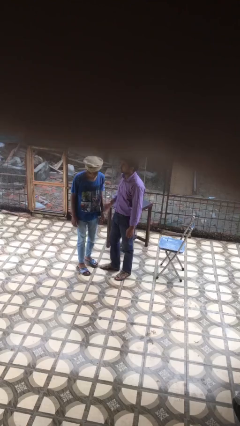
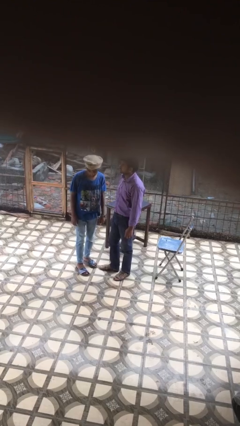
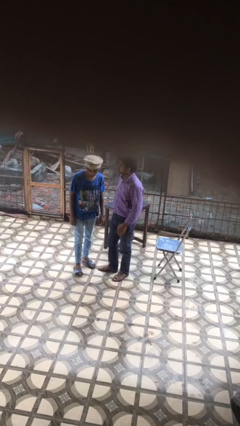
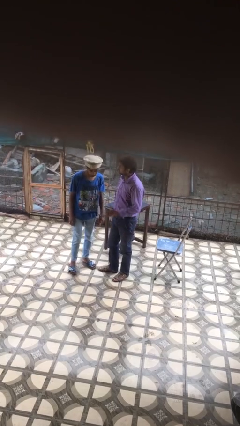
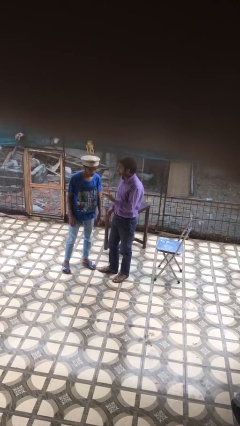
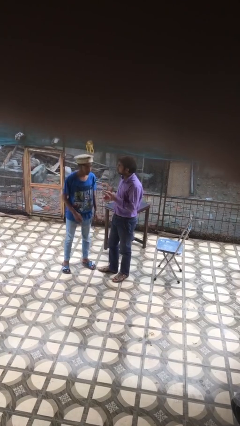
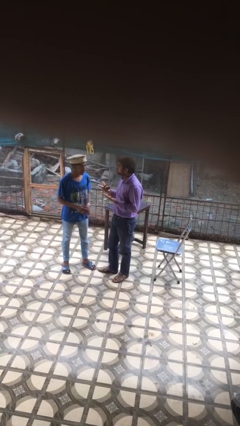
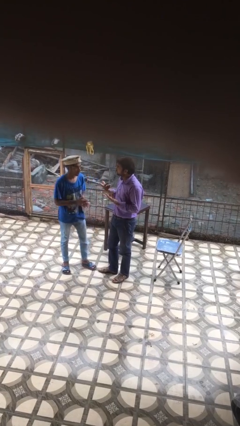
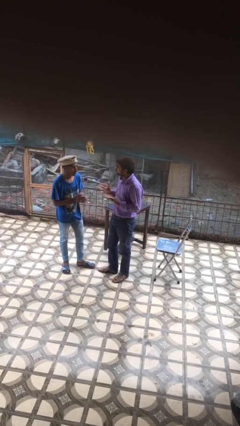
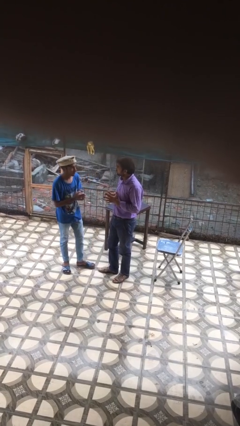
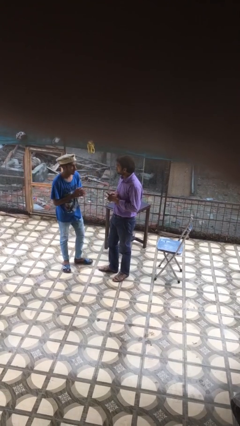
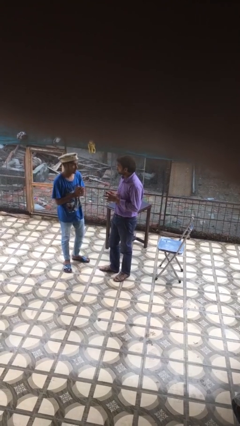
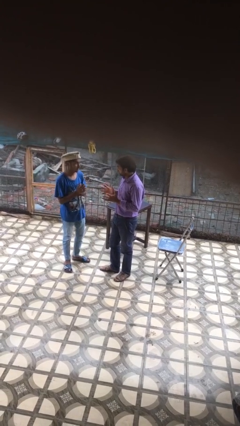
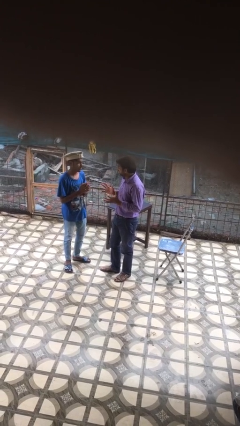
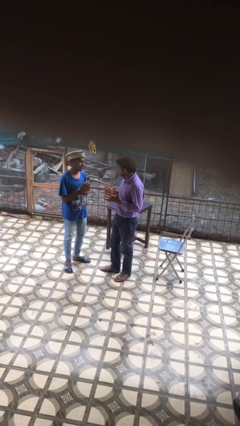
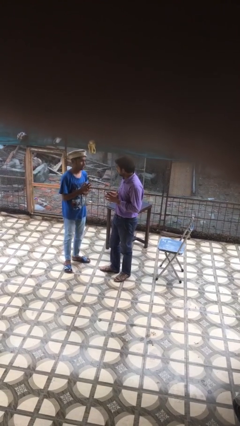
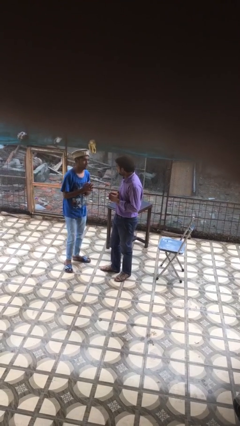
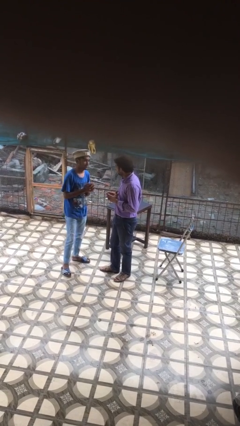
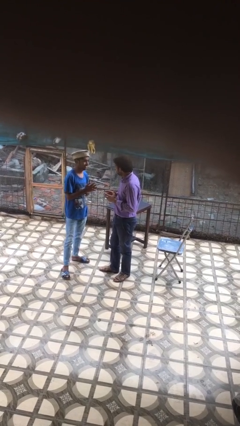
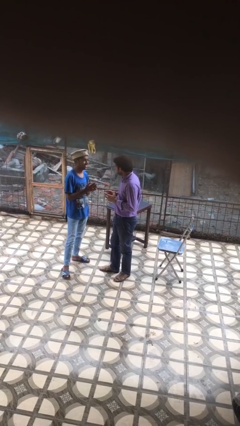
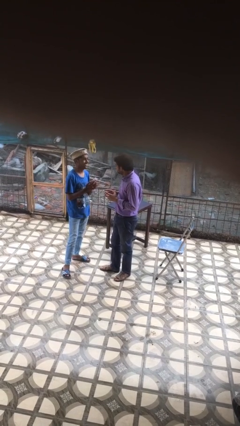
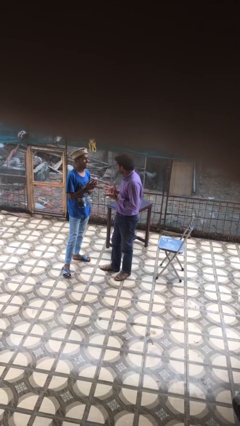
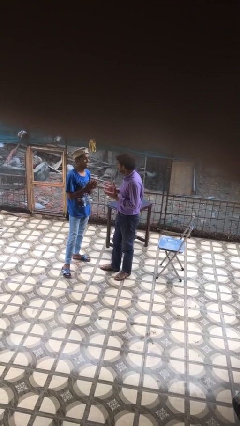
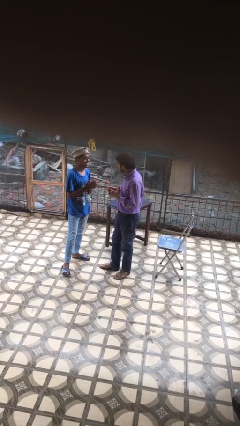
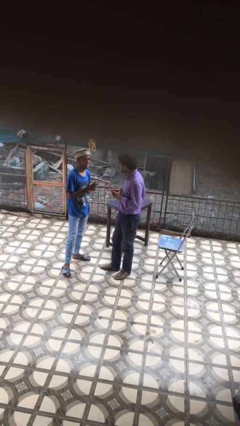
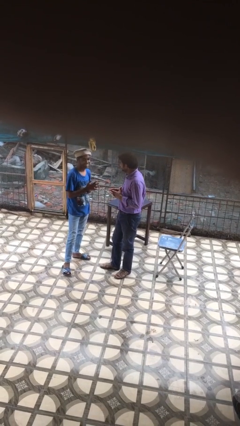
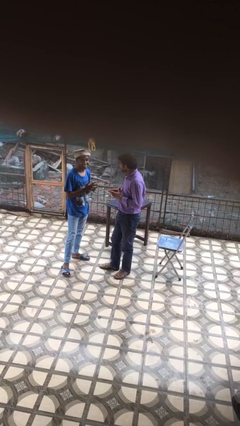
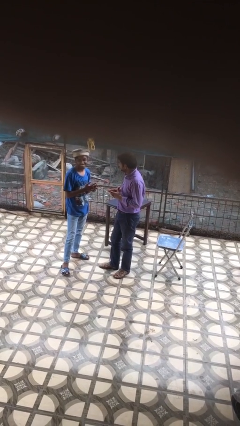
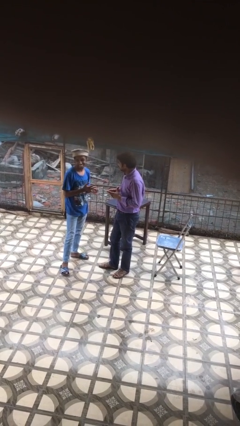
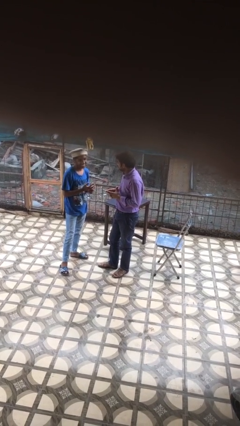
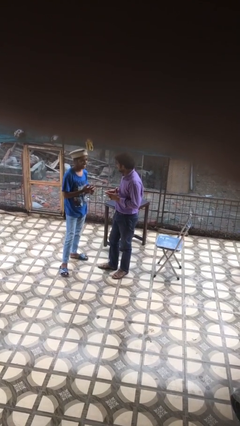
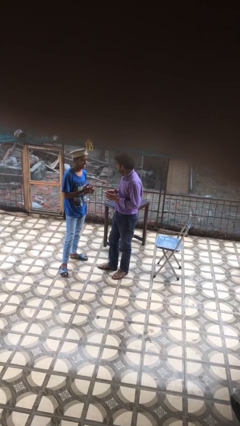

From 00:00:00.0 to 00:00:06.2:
person talks to person

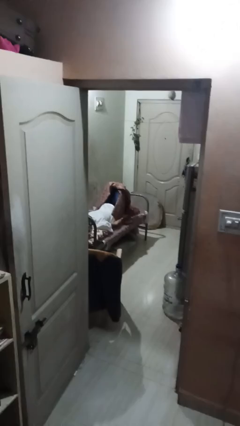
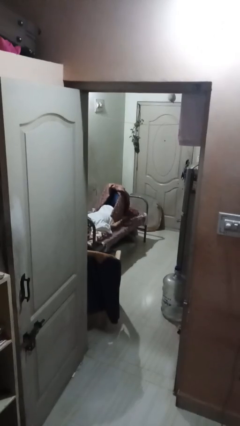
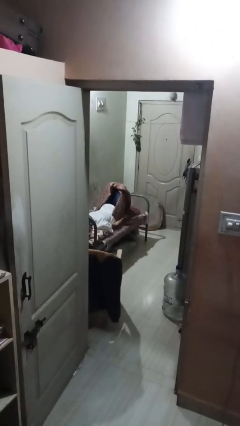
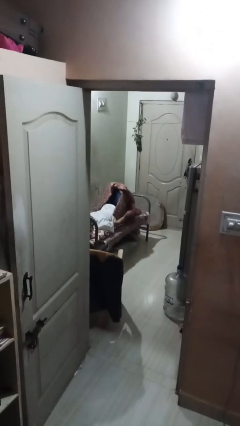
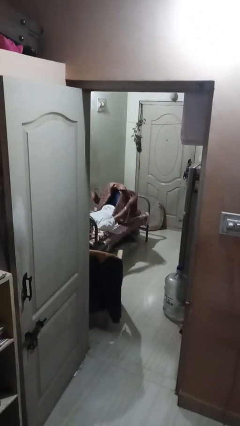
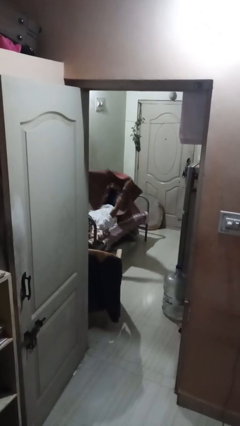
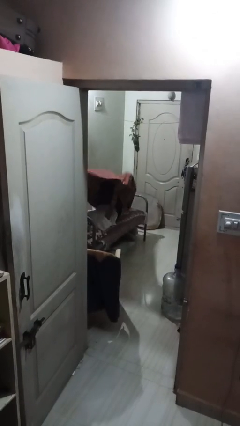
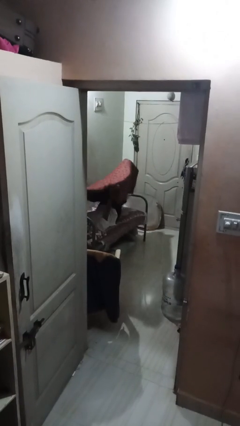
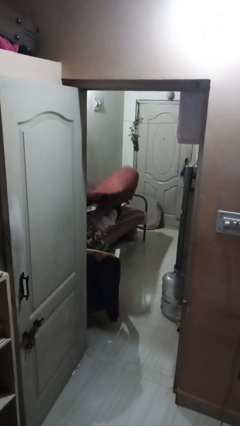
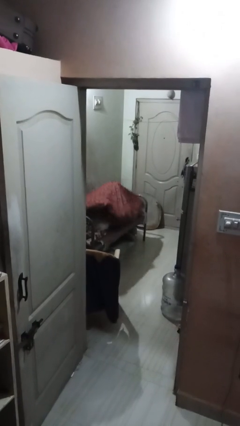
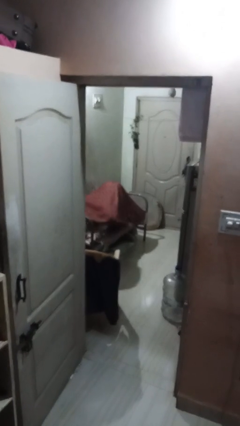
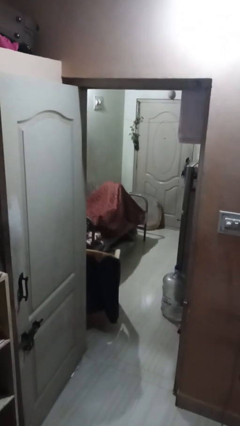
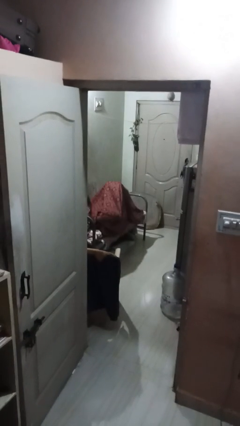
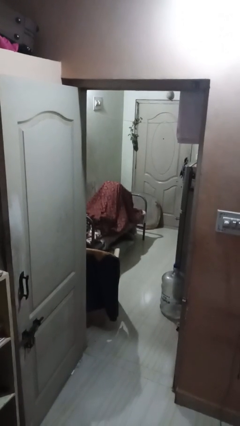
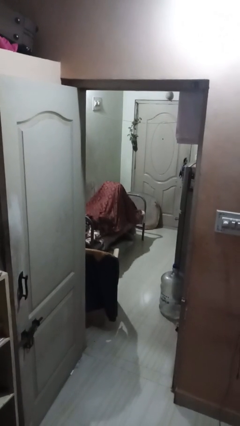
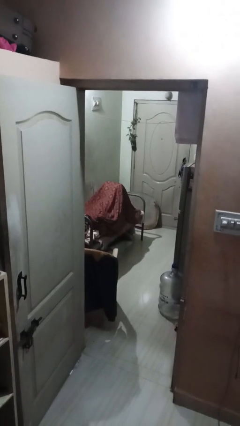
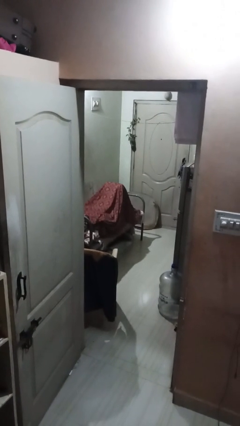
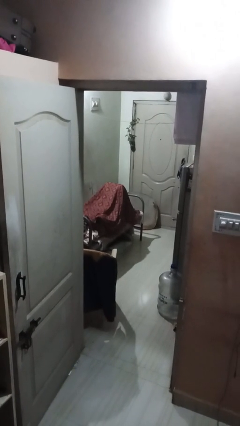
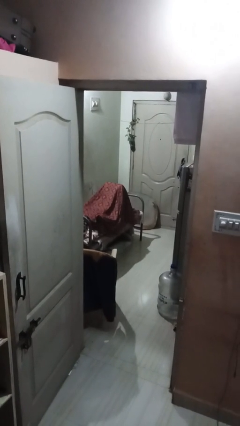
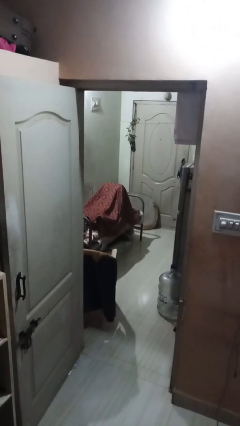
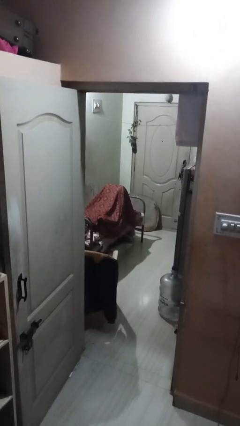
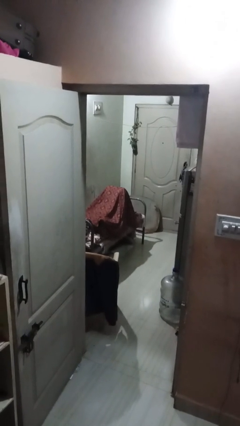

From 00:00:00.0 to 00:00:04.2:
person covers with bedsheets

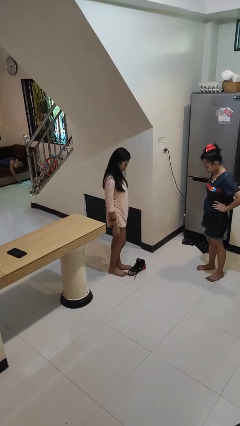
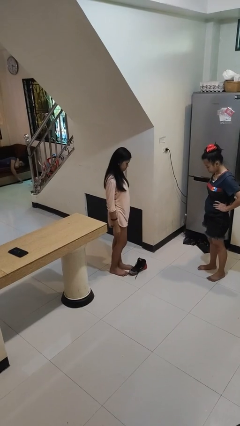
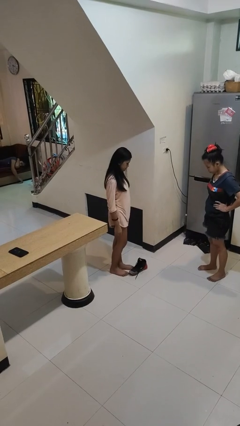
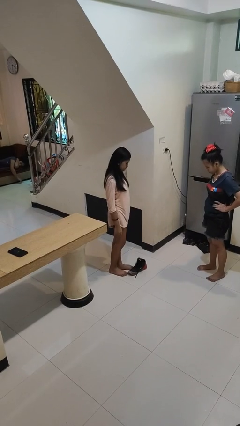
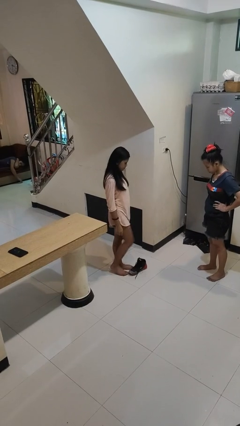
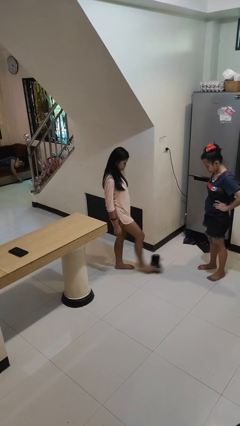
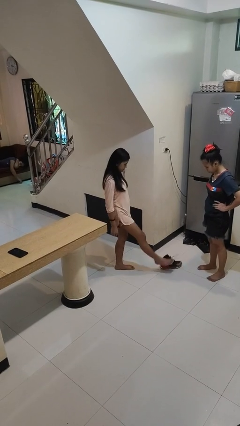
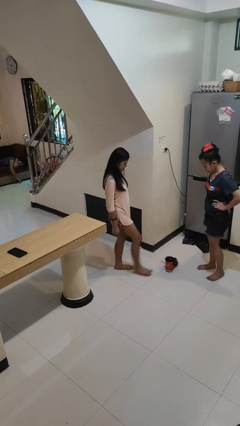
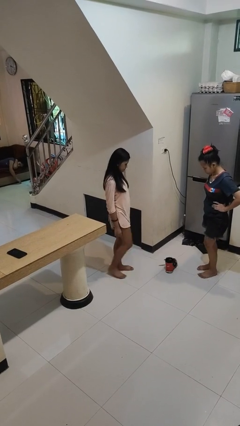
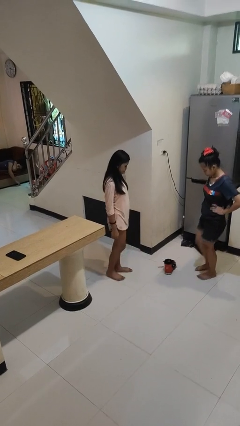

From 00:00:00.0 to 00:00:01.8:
person kicks object to person

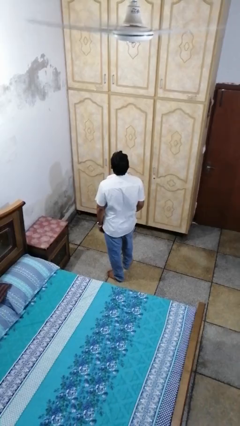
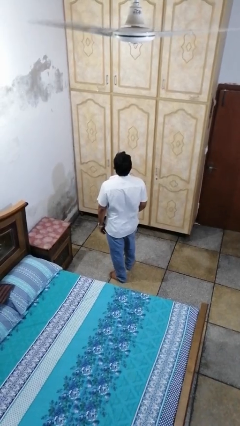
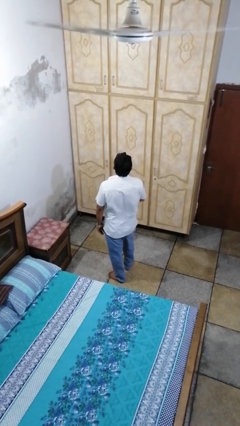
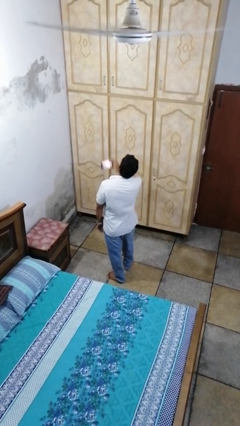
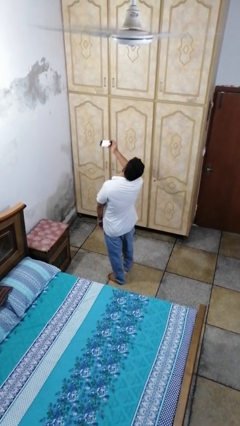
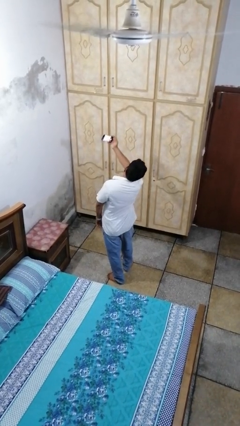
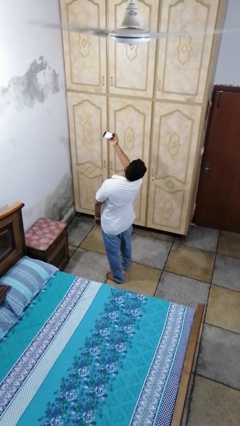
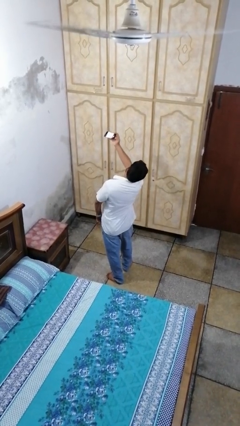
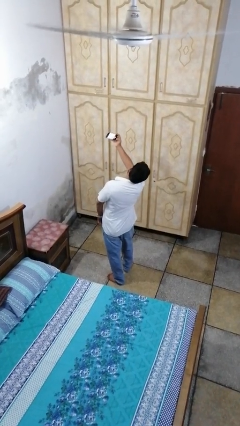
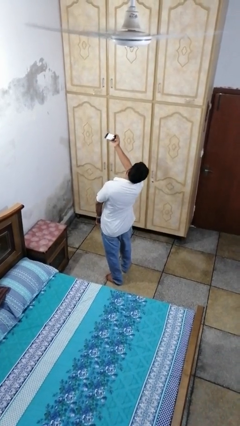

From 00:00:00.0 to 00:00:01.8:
person takes selfie

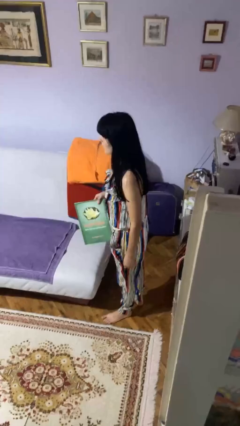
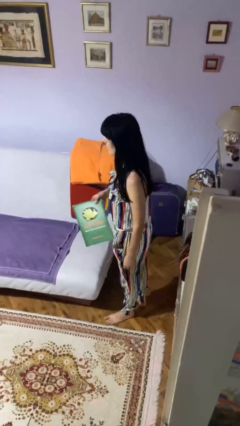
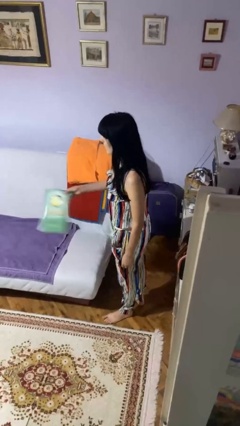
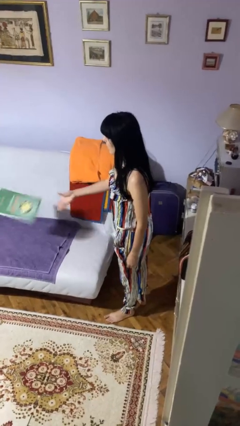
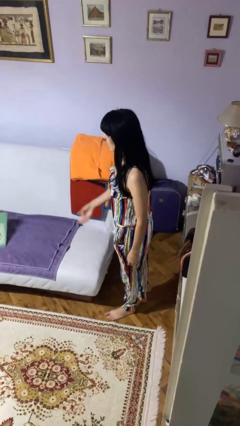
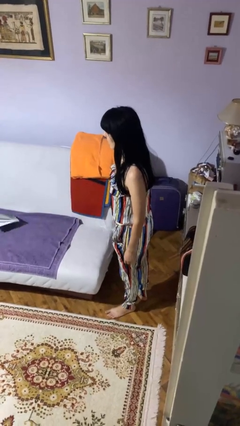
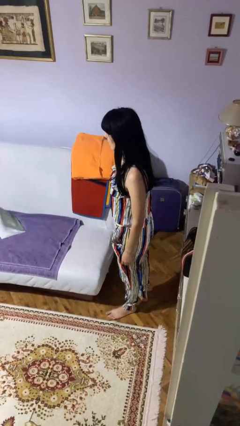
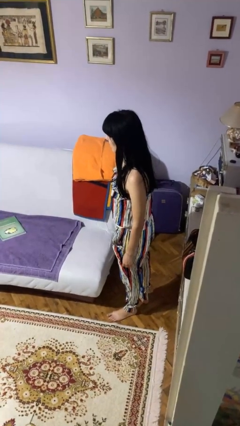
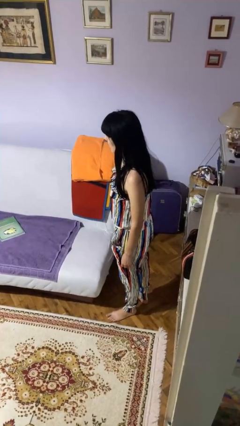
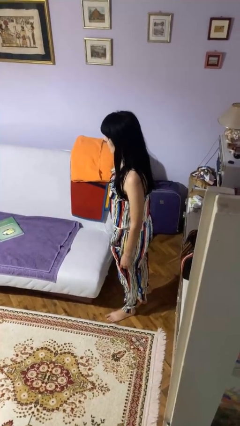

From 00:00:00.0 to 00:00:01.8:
person throws object on bed

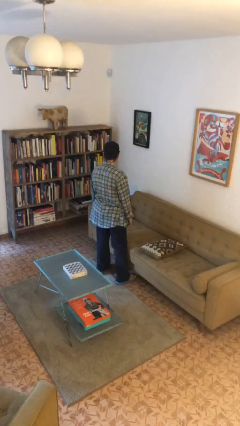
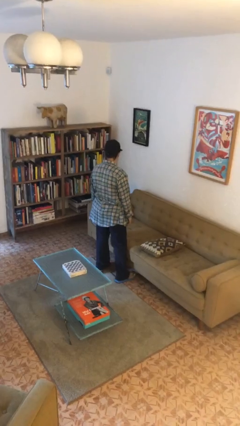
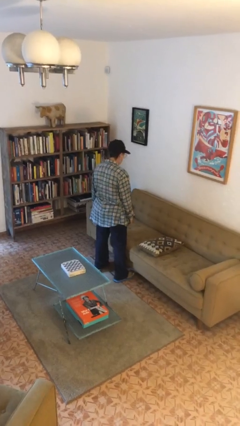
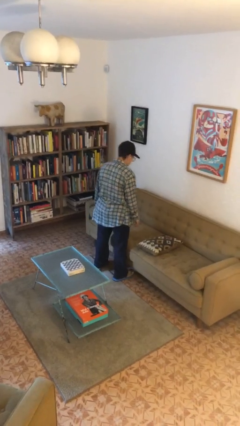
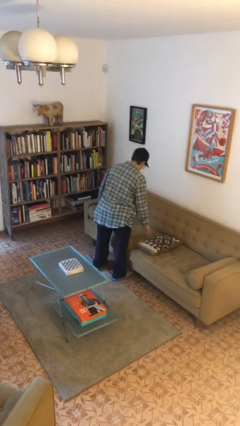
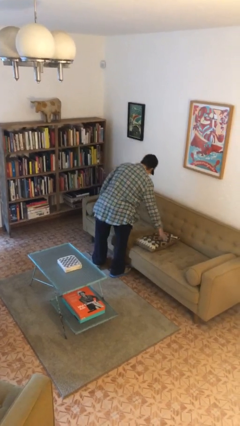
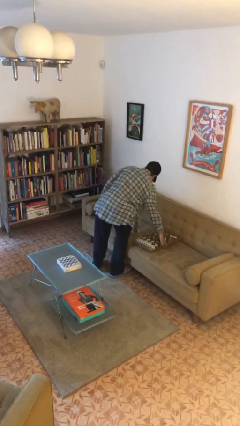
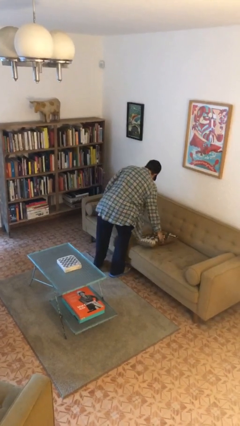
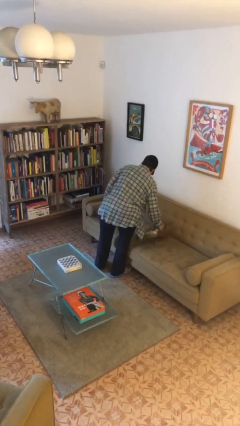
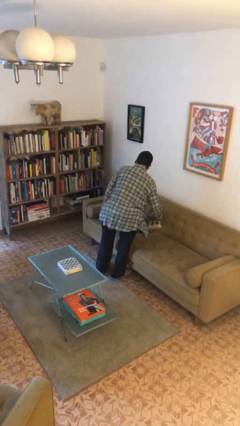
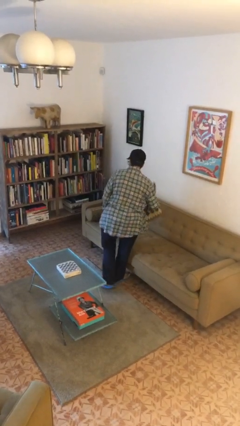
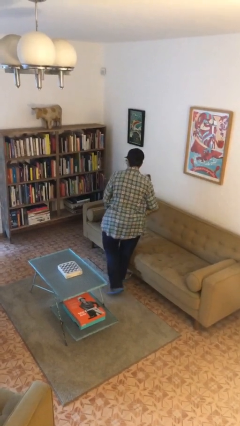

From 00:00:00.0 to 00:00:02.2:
person picks up object from couch
